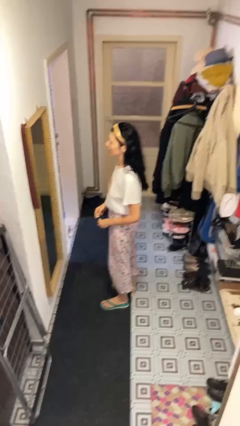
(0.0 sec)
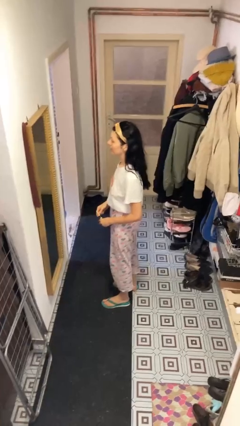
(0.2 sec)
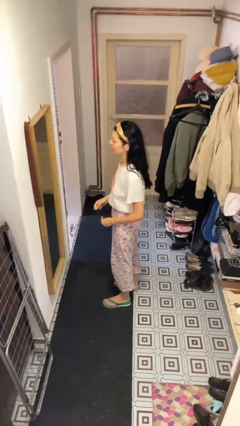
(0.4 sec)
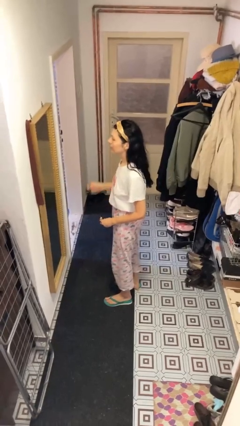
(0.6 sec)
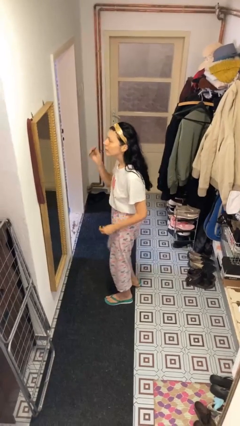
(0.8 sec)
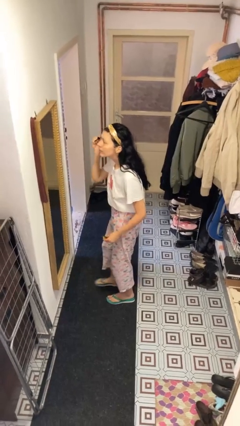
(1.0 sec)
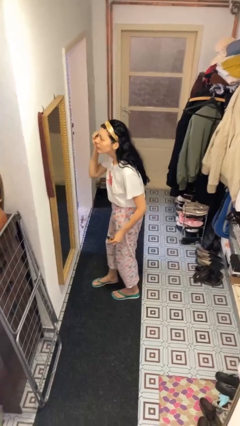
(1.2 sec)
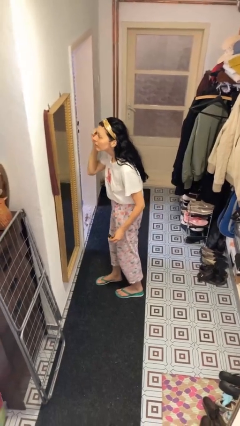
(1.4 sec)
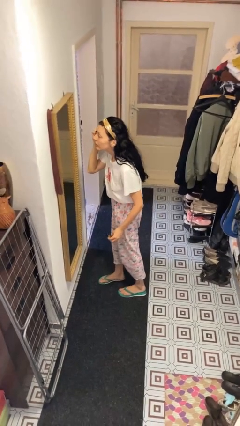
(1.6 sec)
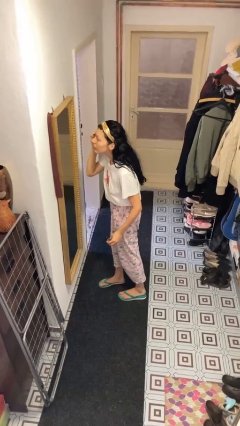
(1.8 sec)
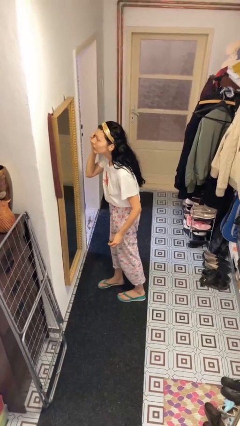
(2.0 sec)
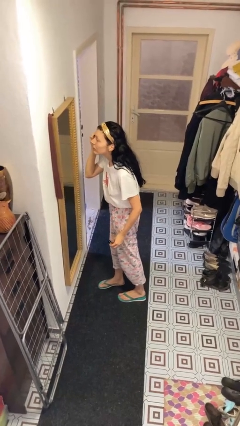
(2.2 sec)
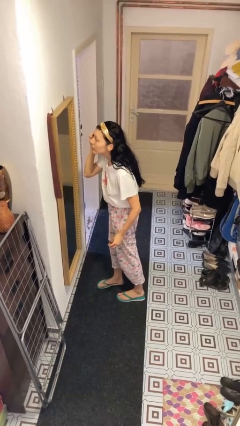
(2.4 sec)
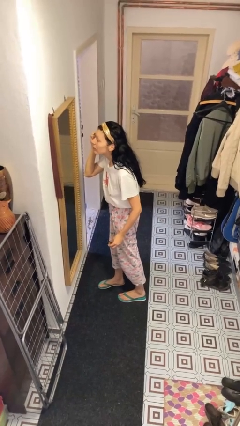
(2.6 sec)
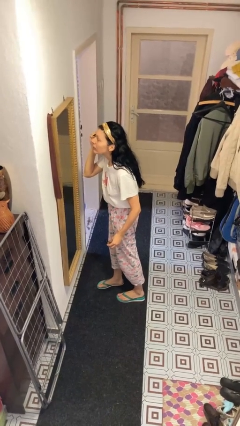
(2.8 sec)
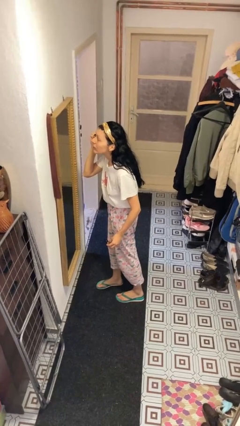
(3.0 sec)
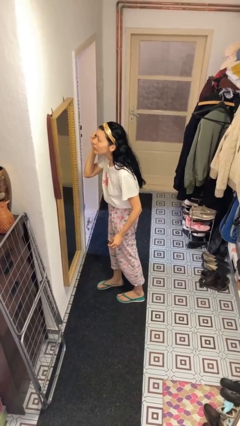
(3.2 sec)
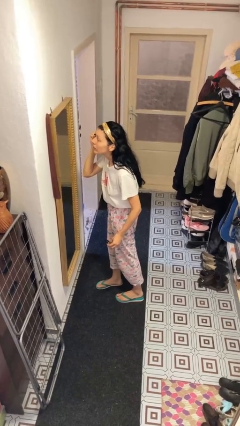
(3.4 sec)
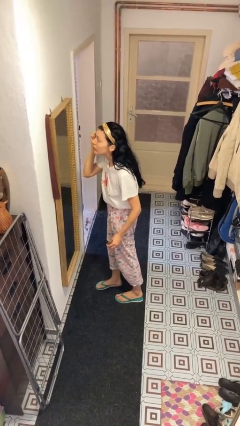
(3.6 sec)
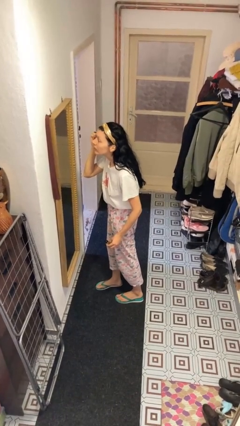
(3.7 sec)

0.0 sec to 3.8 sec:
person applies eye makeup

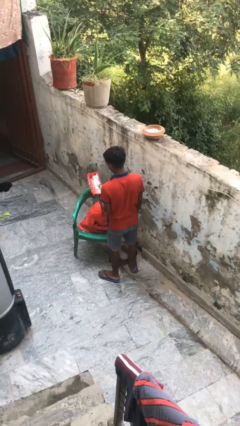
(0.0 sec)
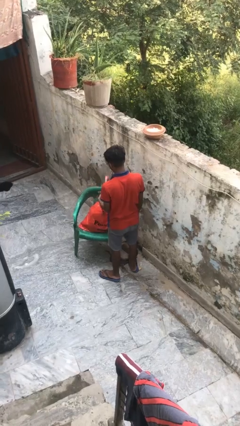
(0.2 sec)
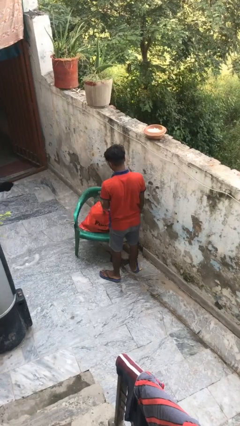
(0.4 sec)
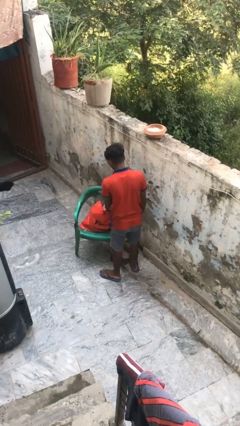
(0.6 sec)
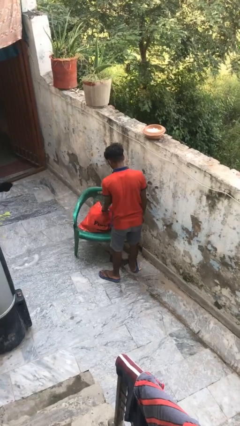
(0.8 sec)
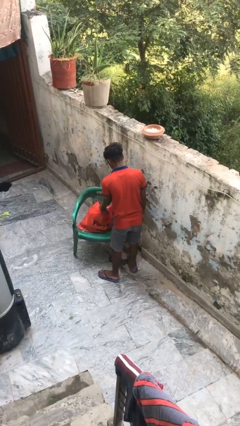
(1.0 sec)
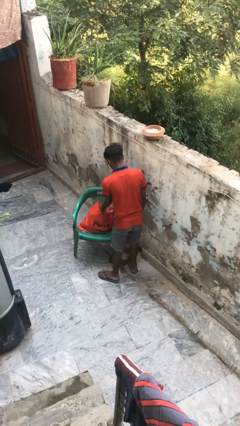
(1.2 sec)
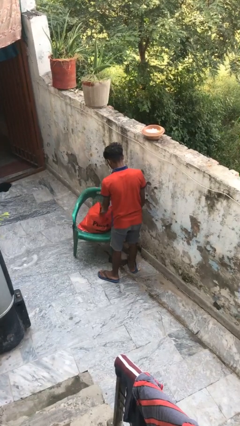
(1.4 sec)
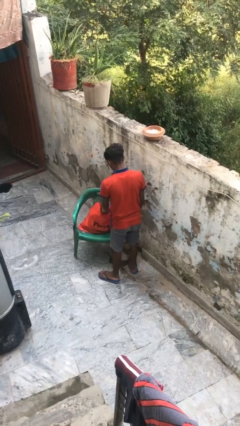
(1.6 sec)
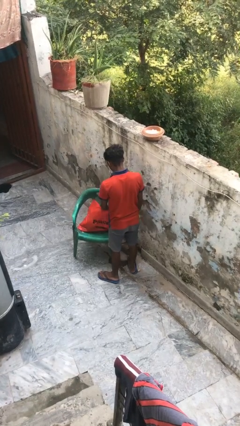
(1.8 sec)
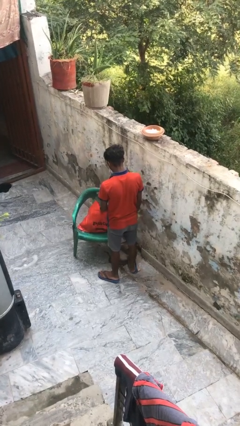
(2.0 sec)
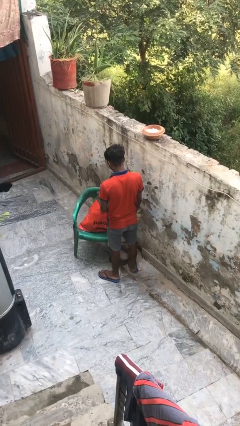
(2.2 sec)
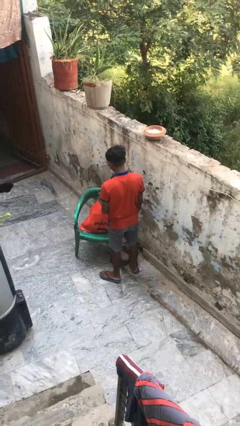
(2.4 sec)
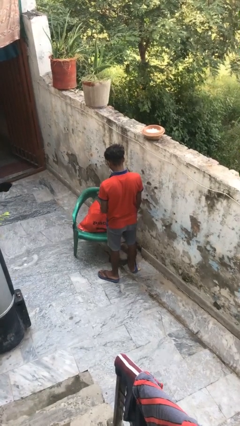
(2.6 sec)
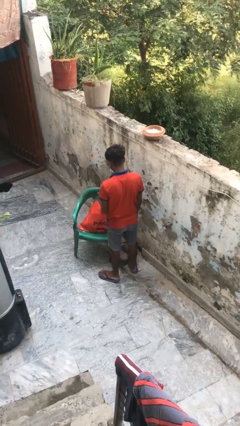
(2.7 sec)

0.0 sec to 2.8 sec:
person puts object into bag

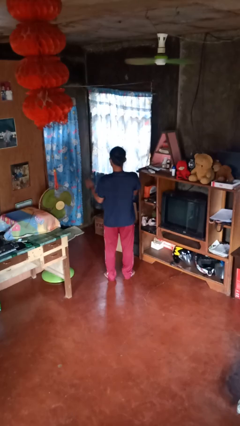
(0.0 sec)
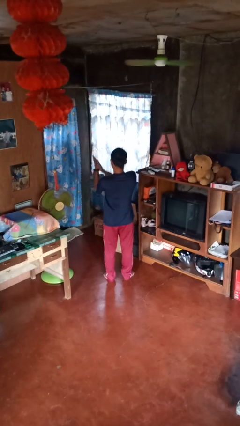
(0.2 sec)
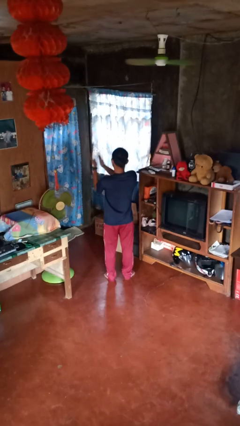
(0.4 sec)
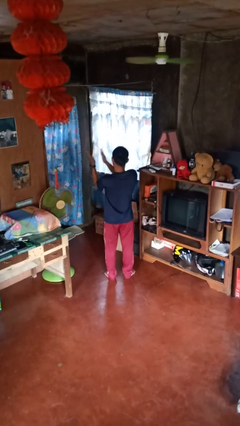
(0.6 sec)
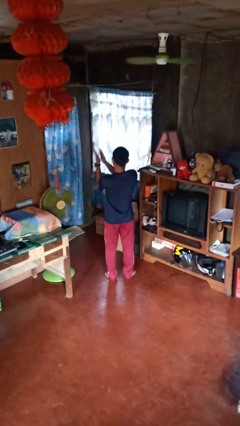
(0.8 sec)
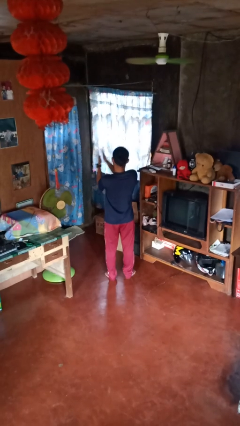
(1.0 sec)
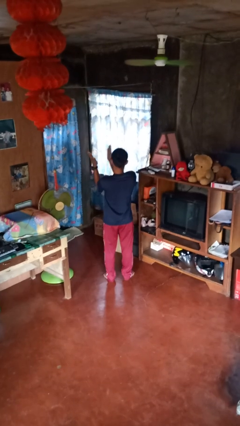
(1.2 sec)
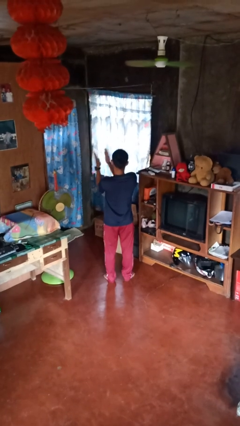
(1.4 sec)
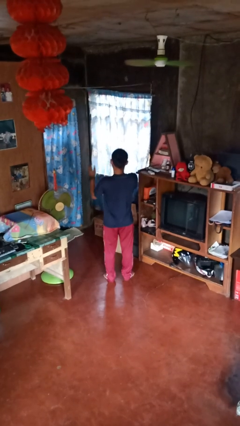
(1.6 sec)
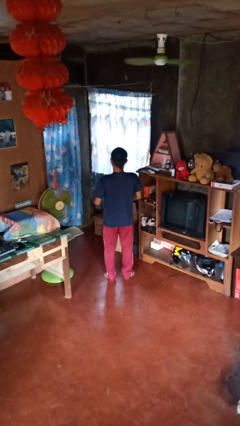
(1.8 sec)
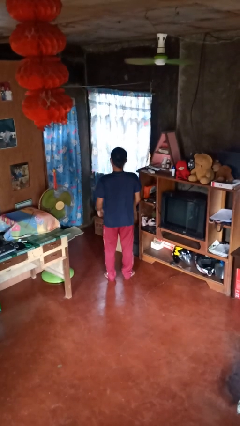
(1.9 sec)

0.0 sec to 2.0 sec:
person claps hands

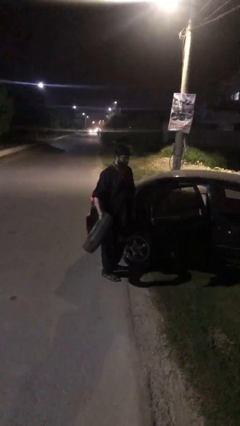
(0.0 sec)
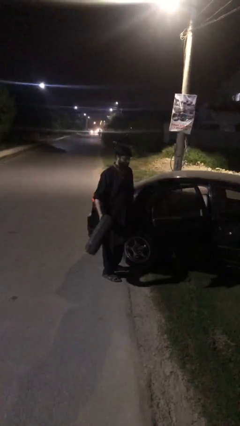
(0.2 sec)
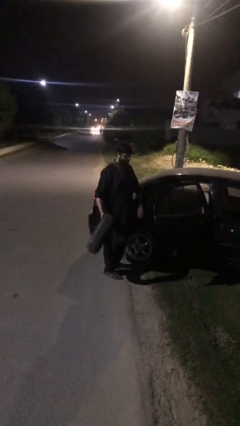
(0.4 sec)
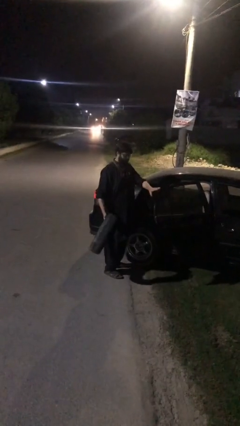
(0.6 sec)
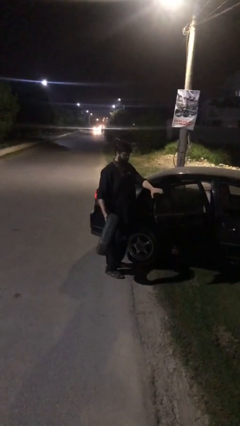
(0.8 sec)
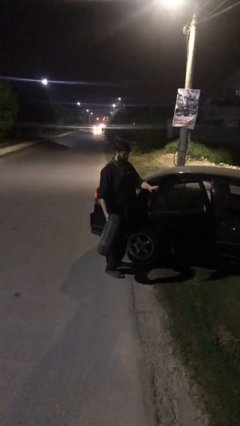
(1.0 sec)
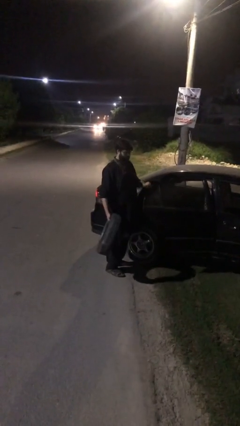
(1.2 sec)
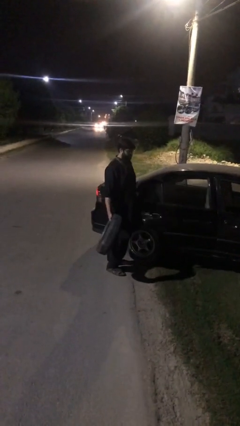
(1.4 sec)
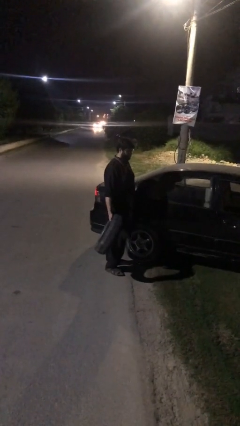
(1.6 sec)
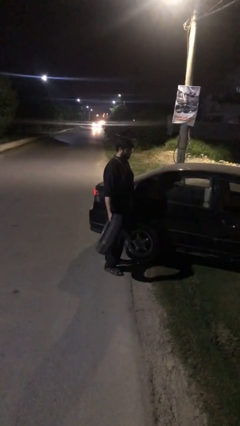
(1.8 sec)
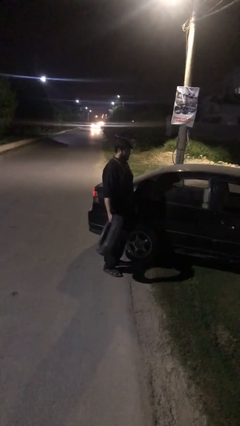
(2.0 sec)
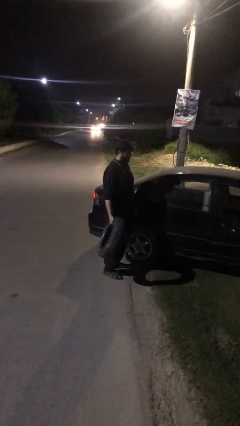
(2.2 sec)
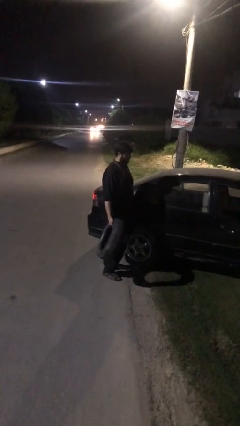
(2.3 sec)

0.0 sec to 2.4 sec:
person closes car door

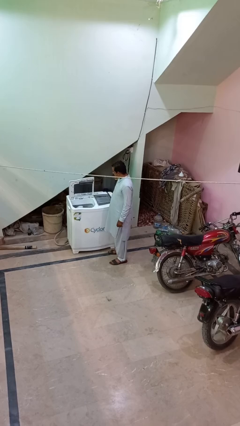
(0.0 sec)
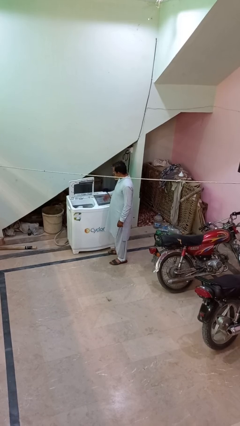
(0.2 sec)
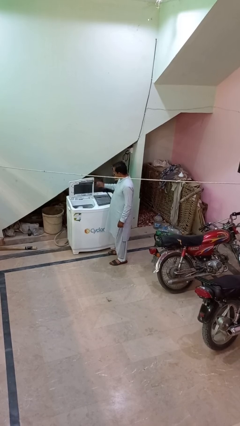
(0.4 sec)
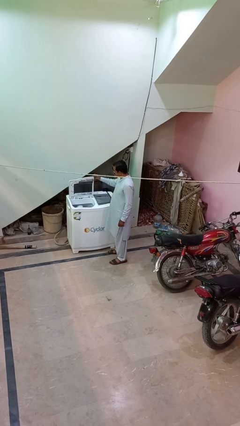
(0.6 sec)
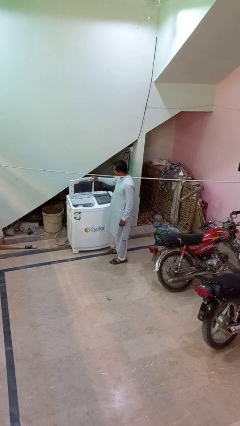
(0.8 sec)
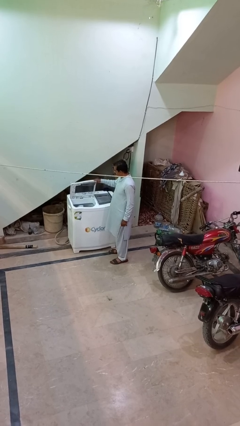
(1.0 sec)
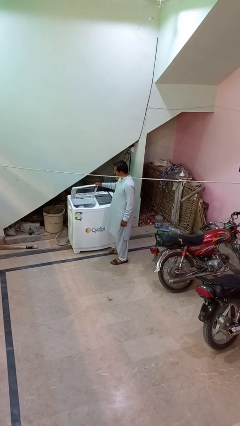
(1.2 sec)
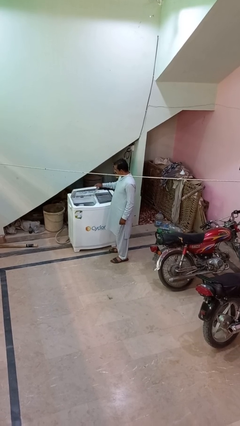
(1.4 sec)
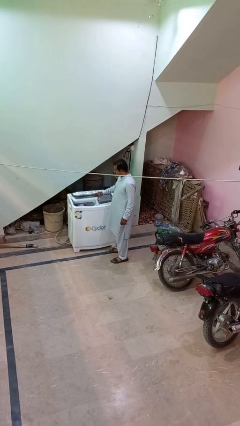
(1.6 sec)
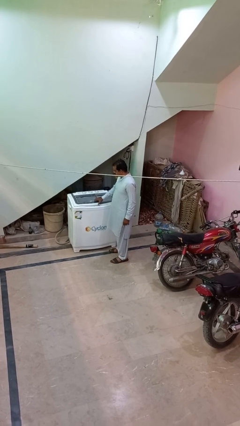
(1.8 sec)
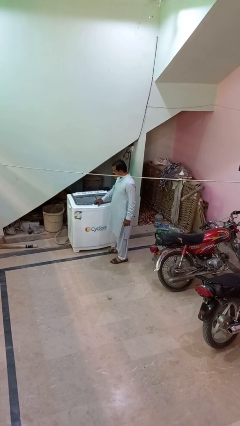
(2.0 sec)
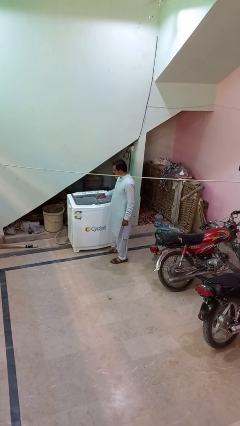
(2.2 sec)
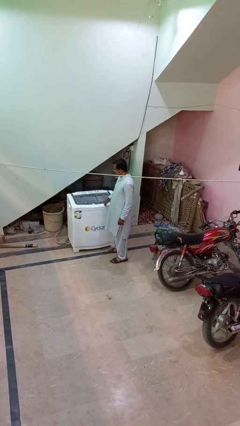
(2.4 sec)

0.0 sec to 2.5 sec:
person closes clothes washer

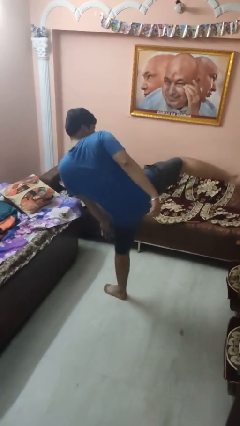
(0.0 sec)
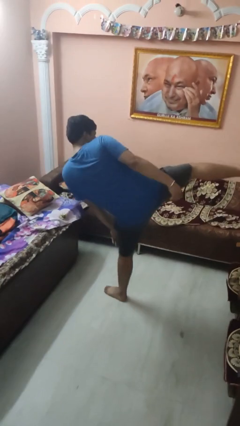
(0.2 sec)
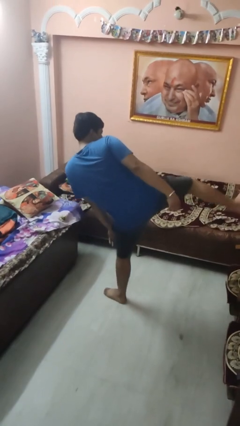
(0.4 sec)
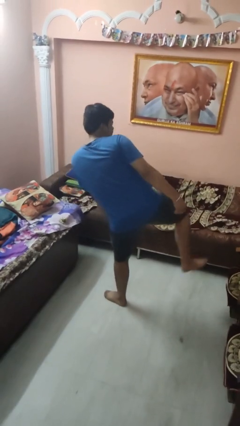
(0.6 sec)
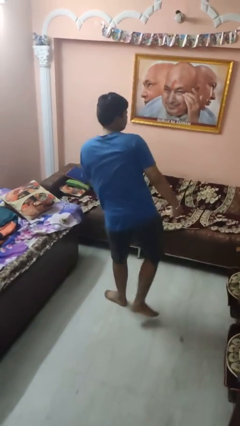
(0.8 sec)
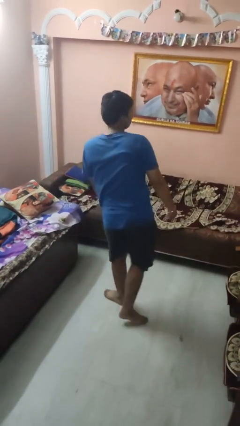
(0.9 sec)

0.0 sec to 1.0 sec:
person karate kicks

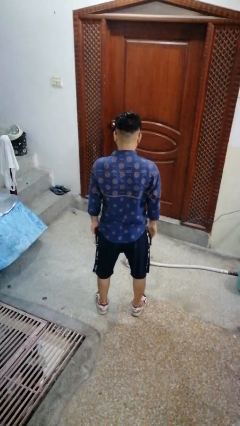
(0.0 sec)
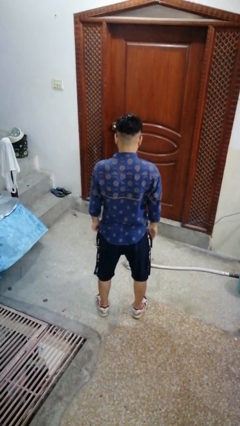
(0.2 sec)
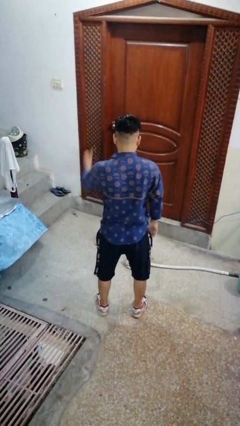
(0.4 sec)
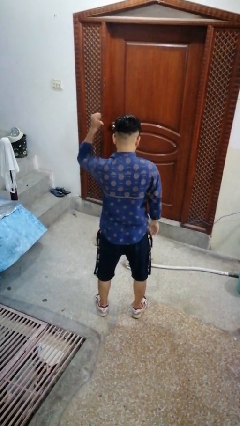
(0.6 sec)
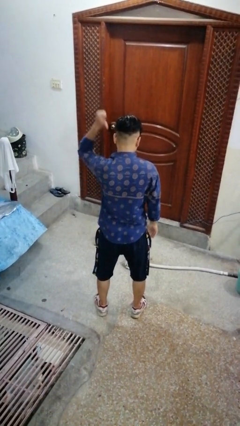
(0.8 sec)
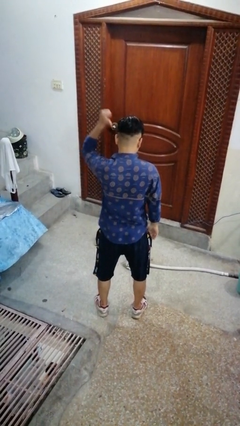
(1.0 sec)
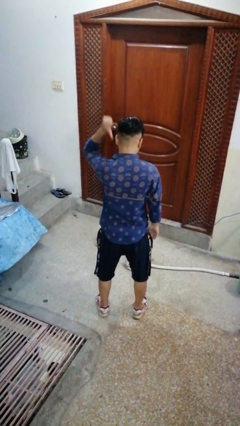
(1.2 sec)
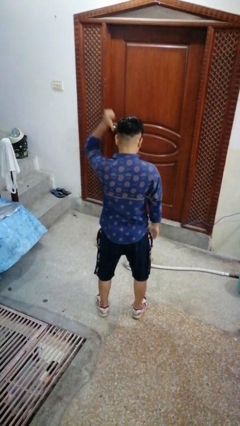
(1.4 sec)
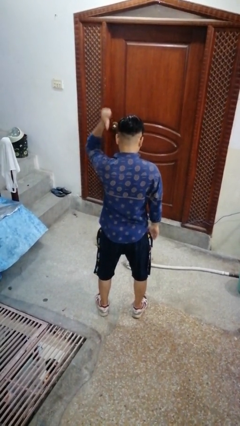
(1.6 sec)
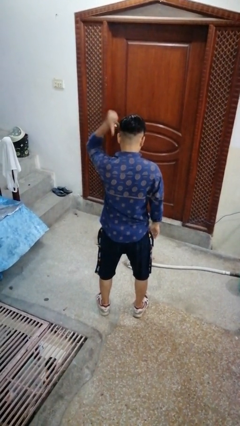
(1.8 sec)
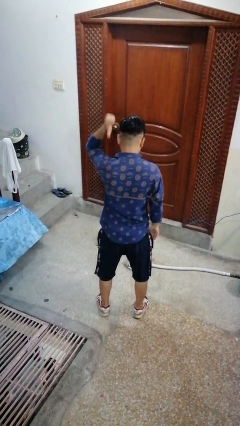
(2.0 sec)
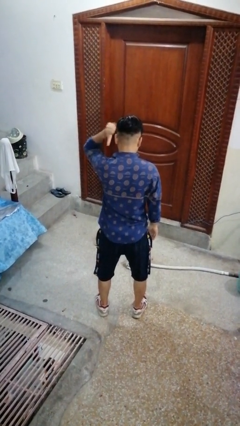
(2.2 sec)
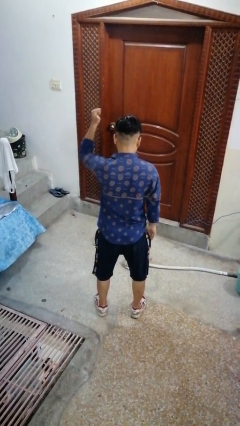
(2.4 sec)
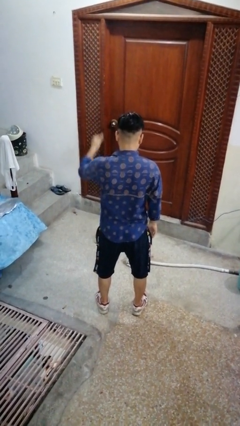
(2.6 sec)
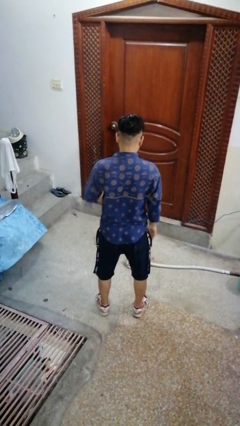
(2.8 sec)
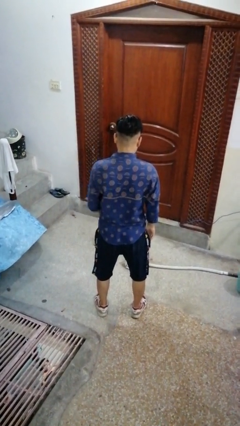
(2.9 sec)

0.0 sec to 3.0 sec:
person gestures behind me
